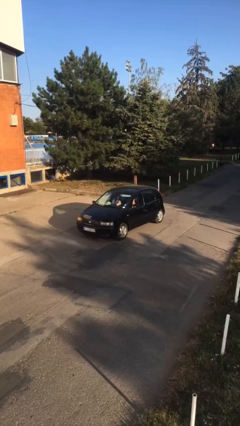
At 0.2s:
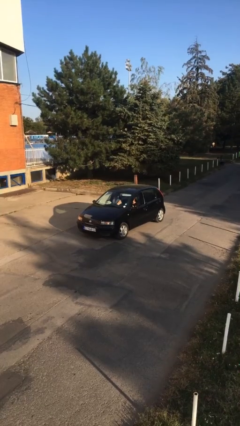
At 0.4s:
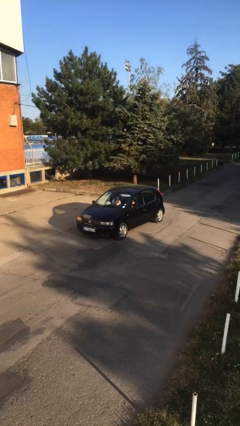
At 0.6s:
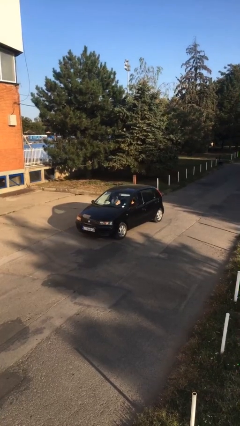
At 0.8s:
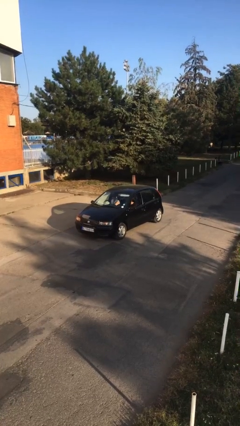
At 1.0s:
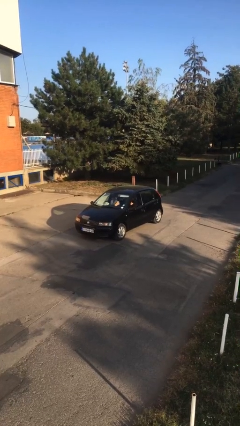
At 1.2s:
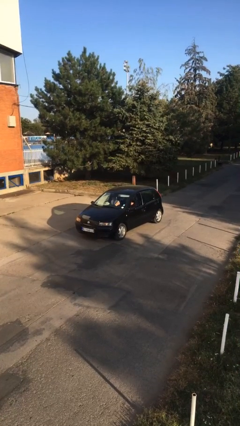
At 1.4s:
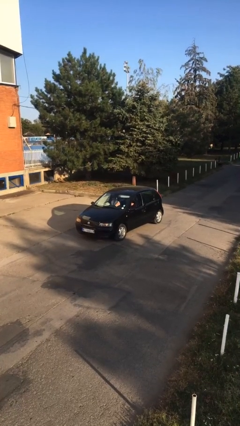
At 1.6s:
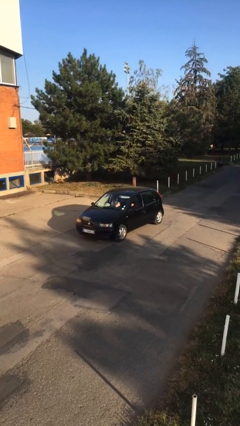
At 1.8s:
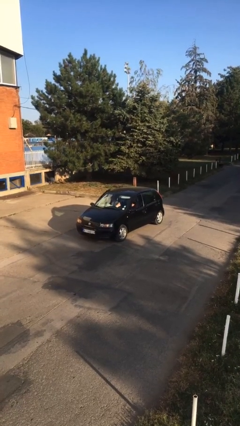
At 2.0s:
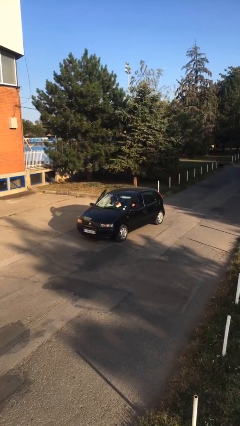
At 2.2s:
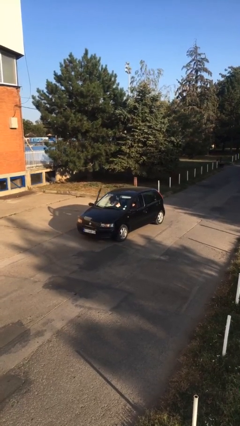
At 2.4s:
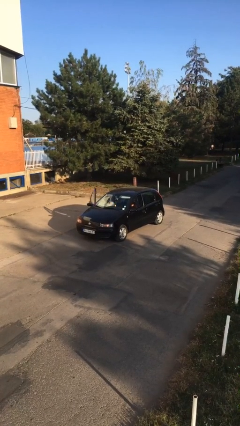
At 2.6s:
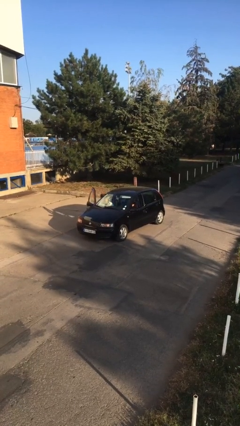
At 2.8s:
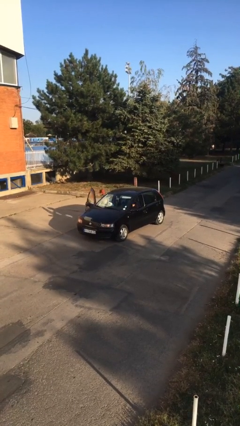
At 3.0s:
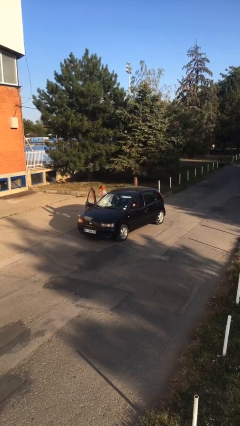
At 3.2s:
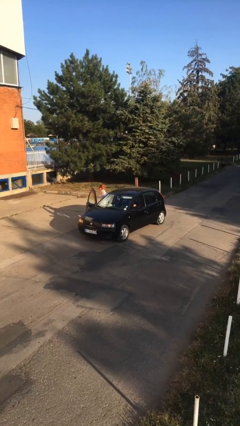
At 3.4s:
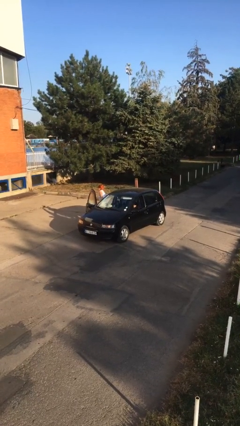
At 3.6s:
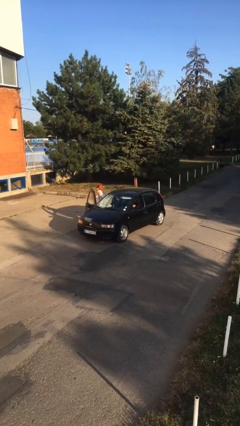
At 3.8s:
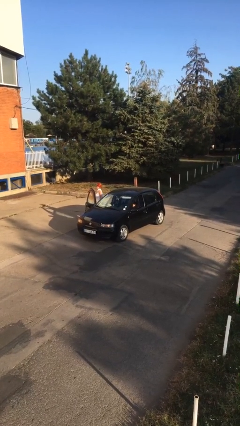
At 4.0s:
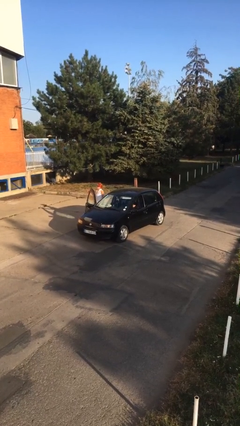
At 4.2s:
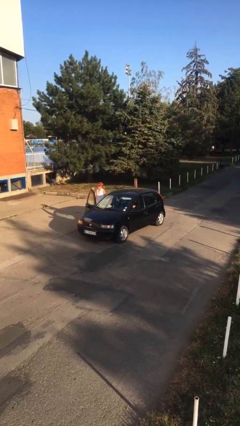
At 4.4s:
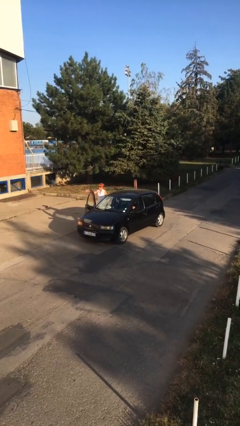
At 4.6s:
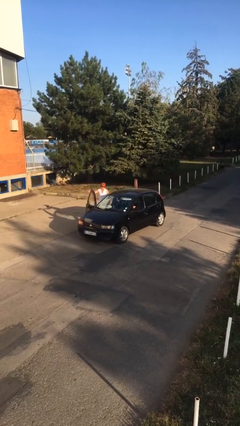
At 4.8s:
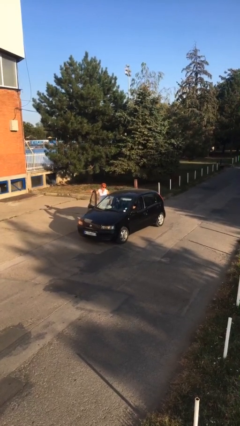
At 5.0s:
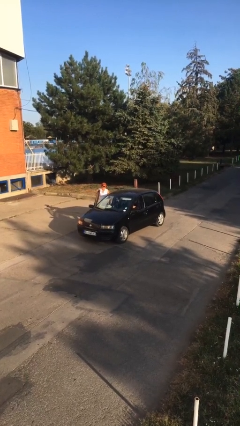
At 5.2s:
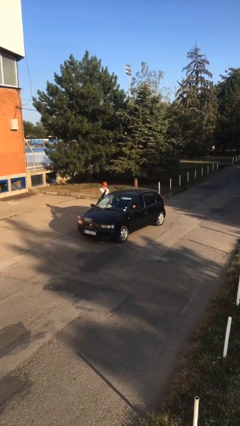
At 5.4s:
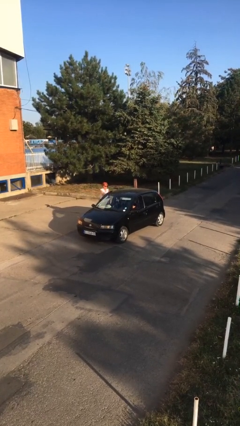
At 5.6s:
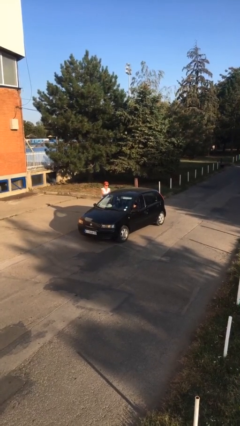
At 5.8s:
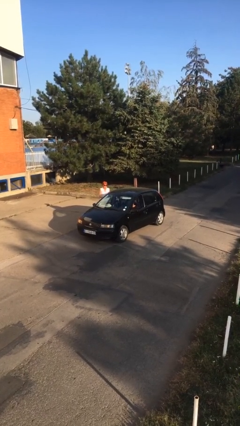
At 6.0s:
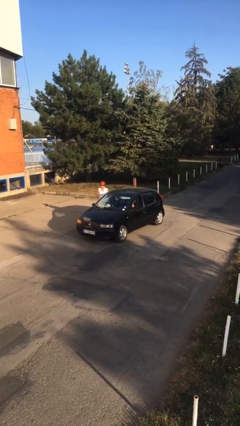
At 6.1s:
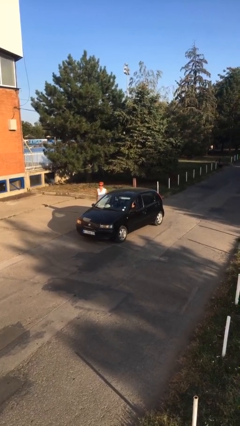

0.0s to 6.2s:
car drops off person

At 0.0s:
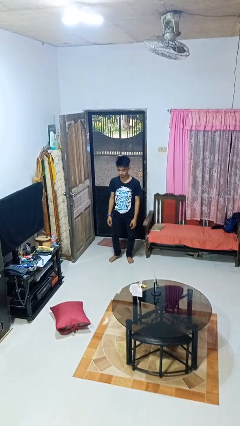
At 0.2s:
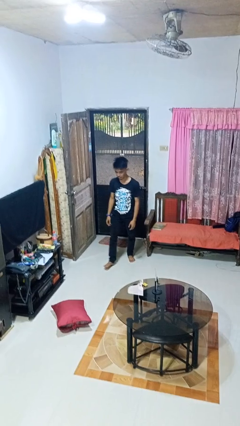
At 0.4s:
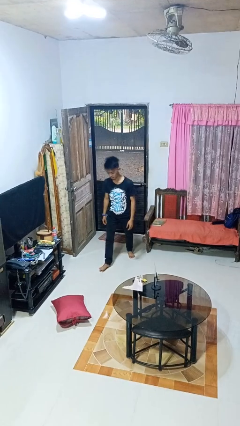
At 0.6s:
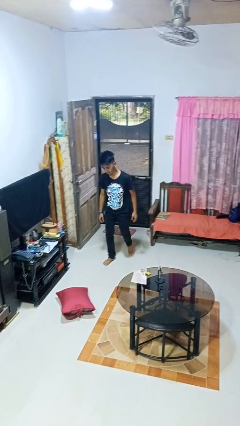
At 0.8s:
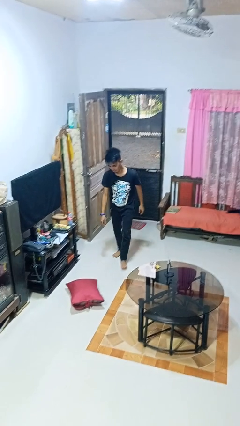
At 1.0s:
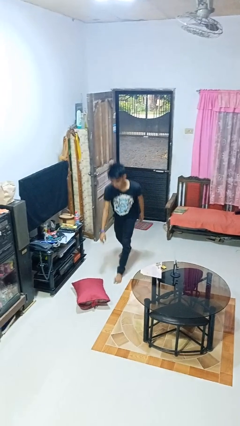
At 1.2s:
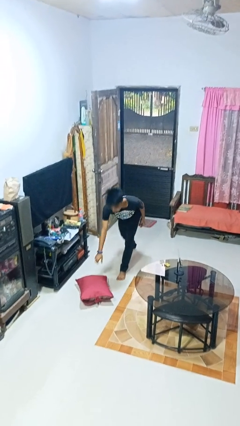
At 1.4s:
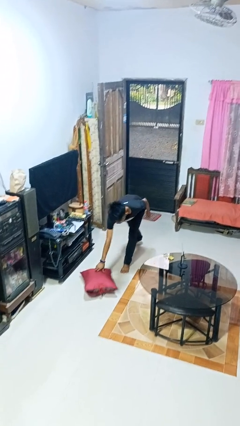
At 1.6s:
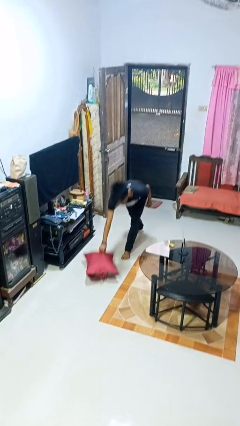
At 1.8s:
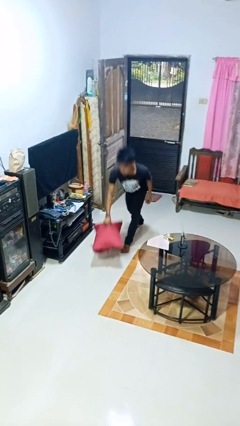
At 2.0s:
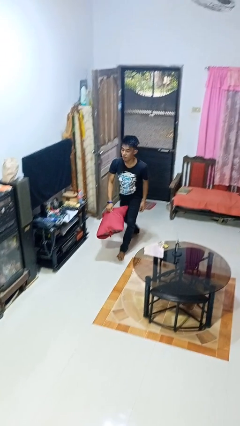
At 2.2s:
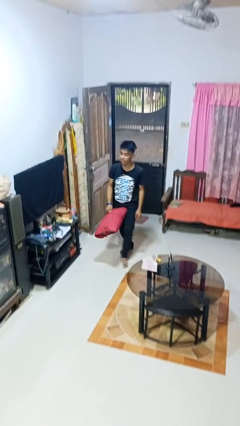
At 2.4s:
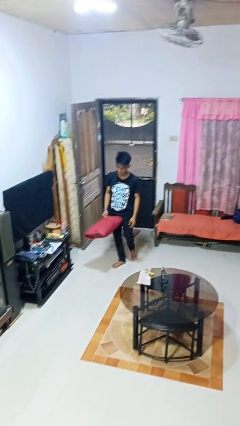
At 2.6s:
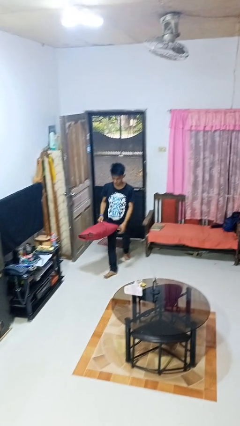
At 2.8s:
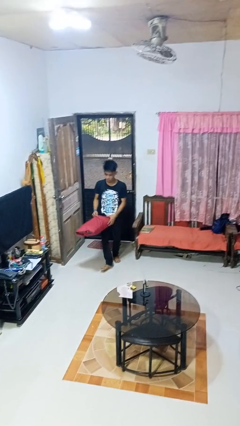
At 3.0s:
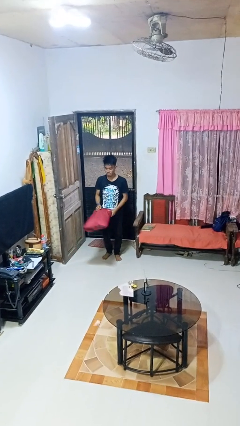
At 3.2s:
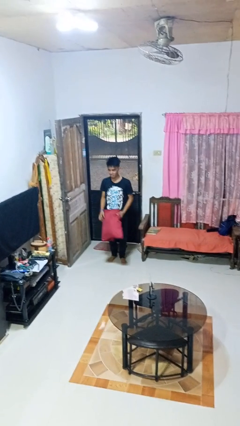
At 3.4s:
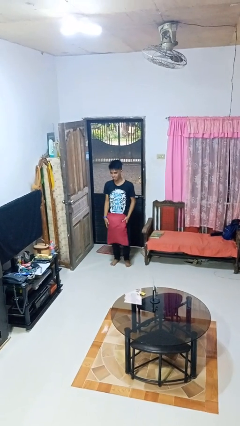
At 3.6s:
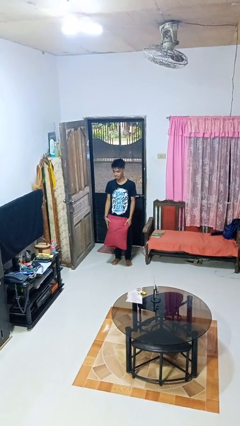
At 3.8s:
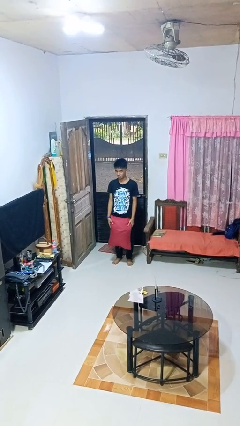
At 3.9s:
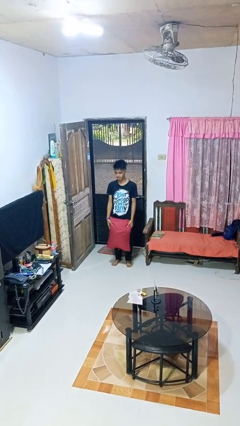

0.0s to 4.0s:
person picks up object from floor

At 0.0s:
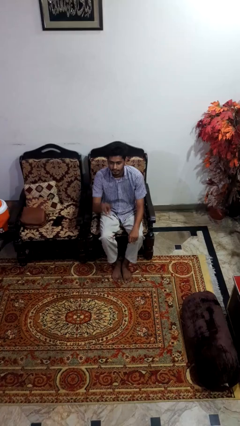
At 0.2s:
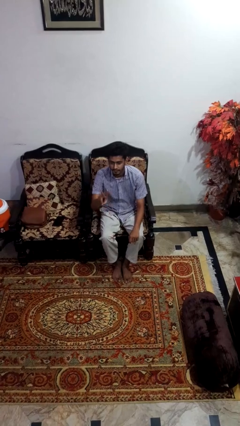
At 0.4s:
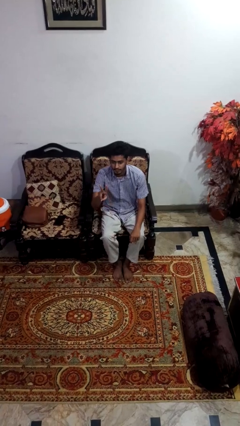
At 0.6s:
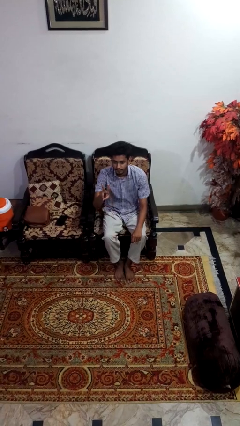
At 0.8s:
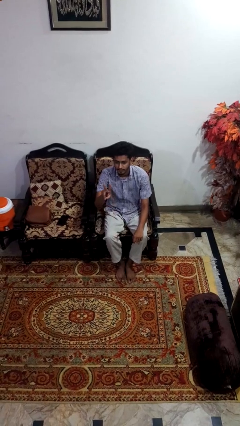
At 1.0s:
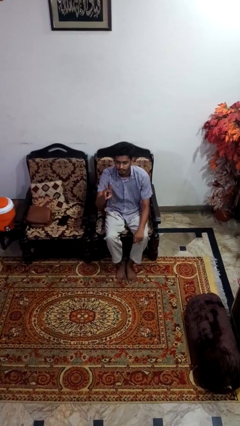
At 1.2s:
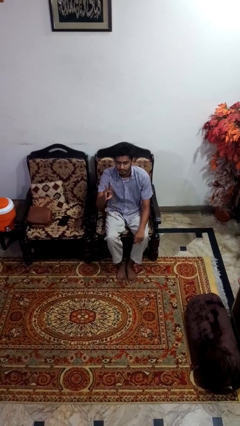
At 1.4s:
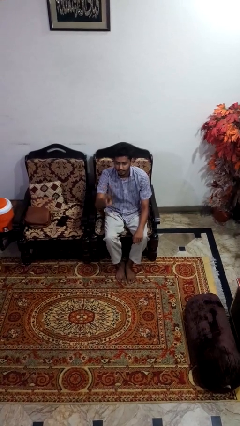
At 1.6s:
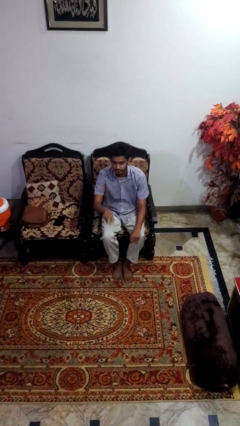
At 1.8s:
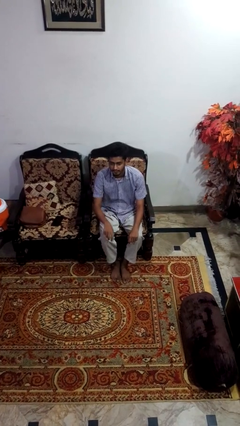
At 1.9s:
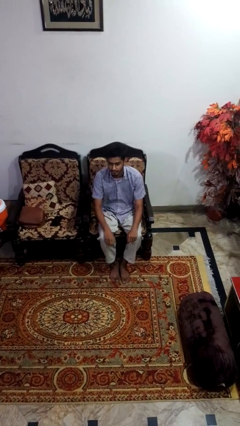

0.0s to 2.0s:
person gestures peace

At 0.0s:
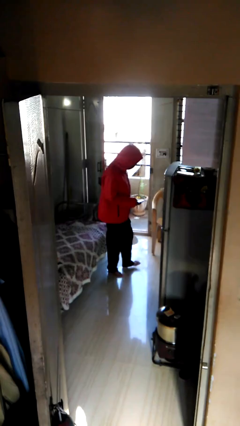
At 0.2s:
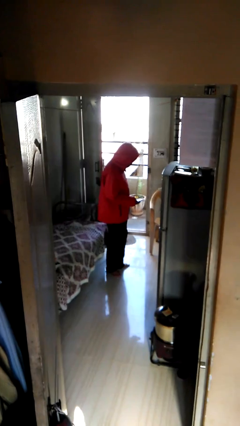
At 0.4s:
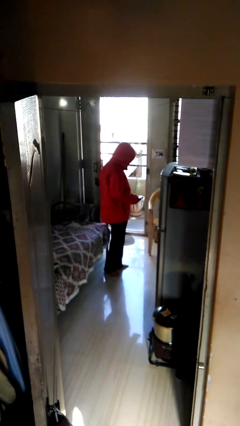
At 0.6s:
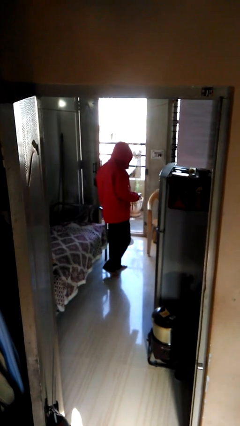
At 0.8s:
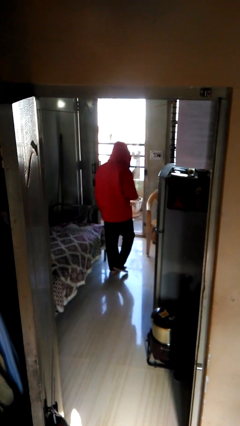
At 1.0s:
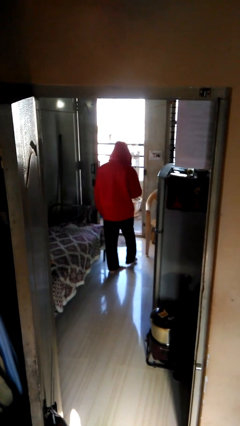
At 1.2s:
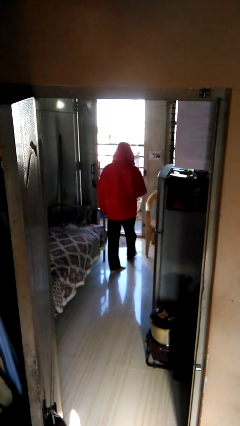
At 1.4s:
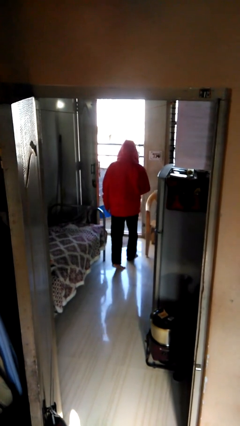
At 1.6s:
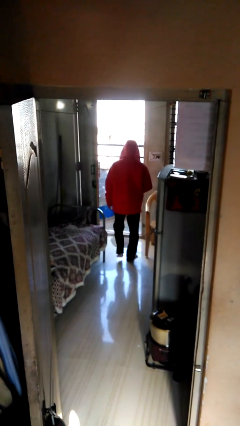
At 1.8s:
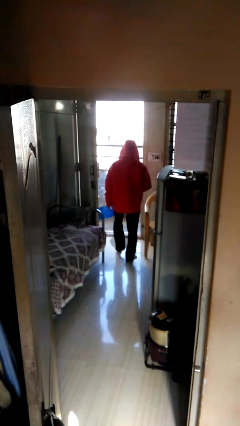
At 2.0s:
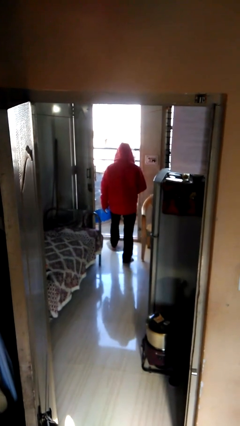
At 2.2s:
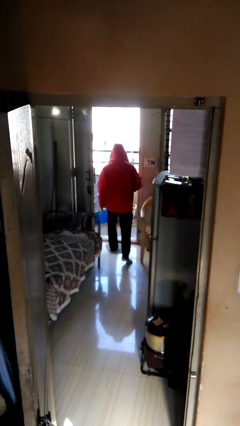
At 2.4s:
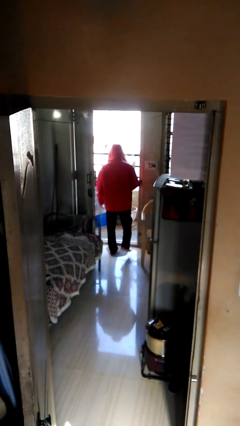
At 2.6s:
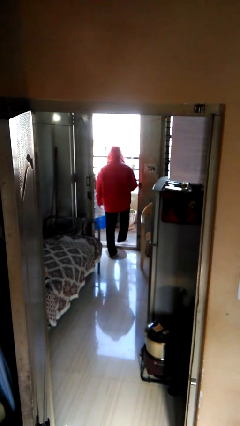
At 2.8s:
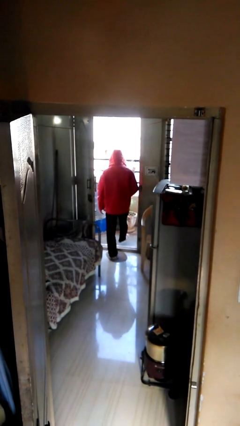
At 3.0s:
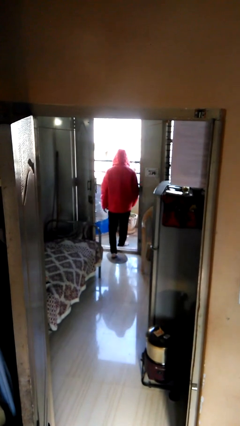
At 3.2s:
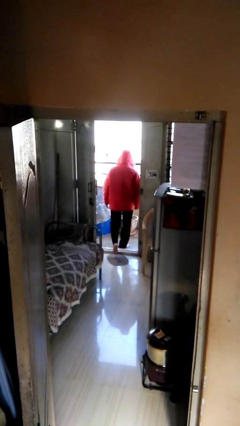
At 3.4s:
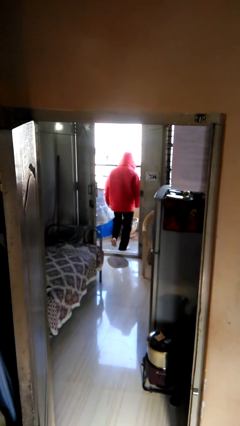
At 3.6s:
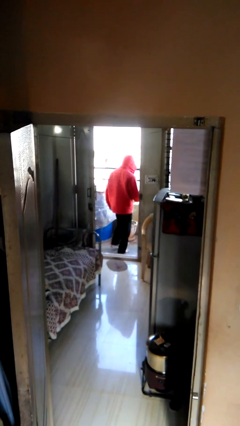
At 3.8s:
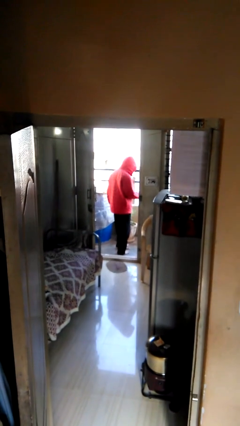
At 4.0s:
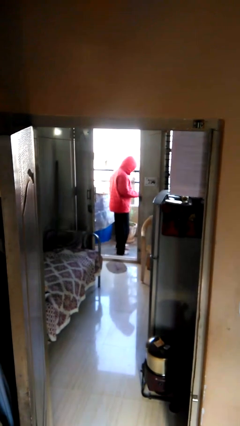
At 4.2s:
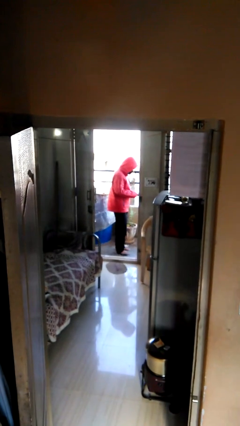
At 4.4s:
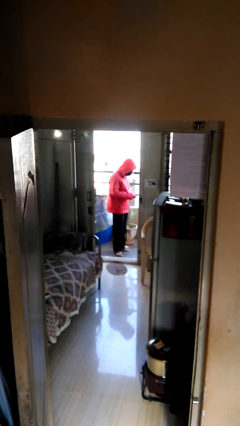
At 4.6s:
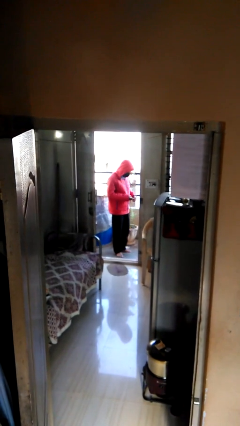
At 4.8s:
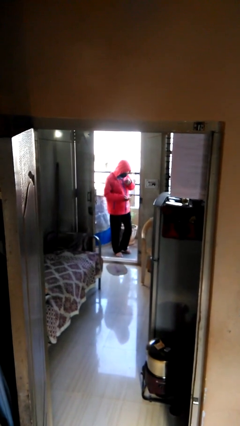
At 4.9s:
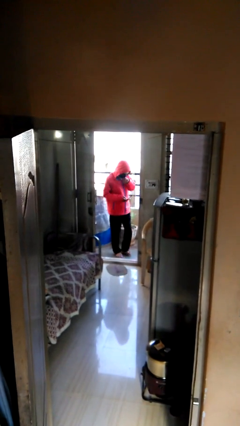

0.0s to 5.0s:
person exits scene through structure
